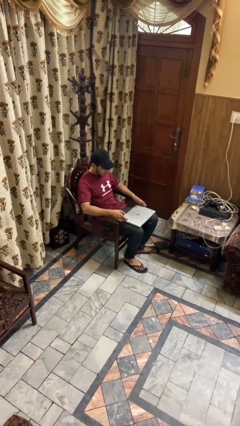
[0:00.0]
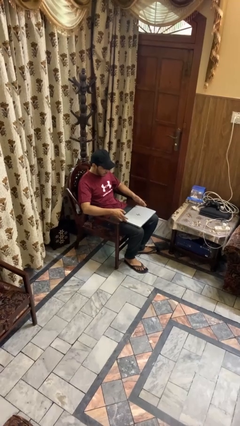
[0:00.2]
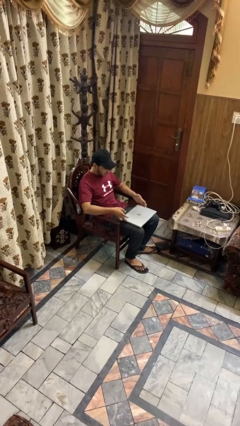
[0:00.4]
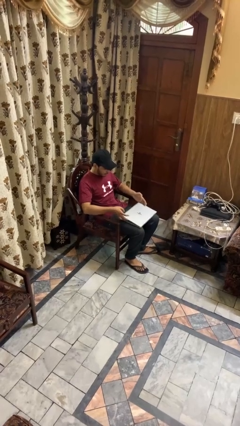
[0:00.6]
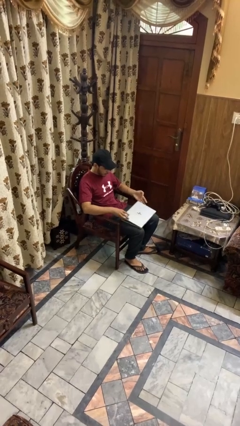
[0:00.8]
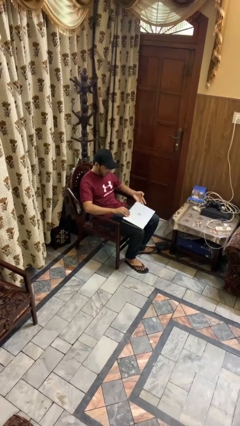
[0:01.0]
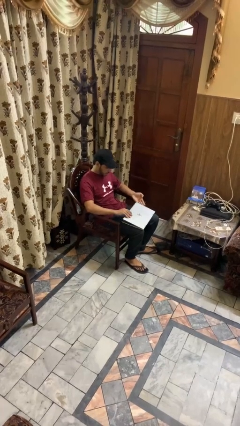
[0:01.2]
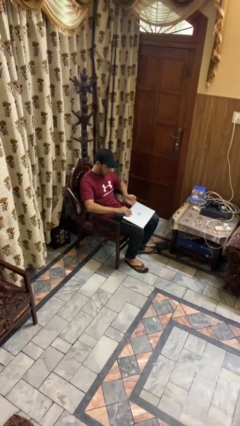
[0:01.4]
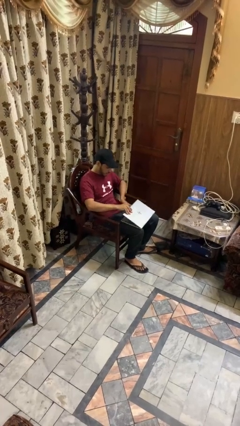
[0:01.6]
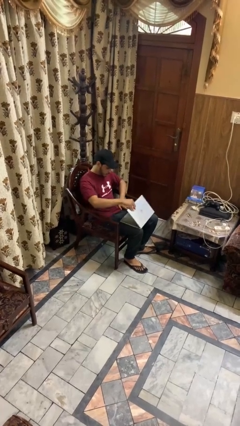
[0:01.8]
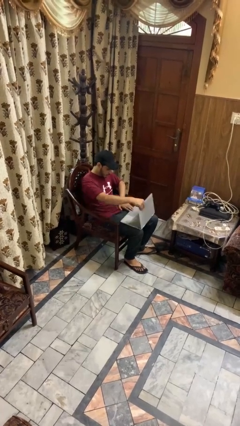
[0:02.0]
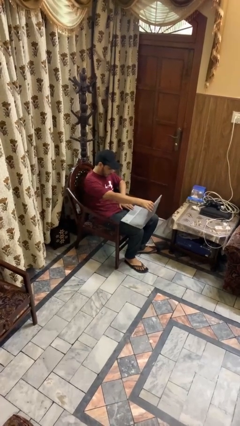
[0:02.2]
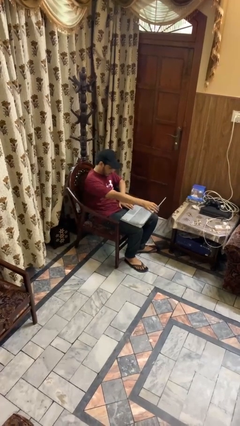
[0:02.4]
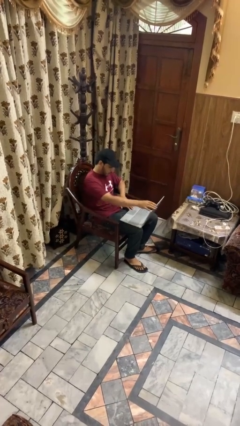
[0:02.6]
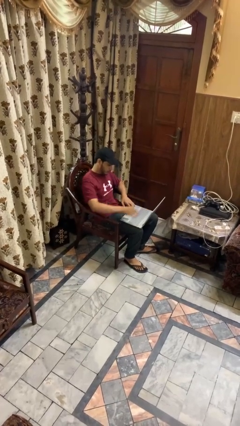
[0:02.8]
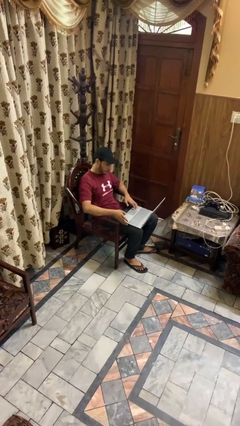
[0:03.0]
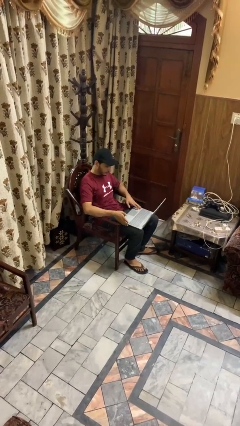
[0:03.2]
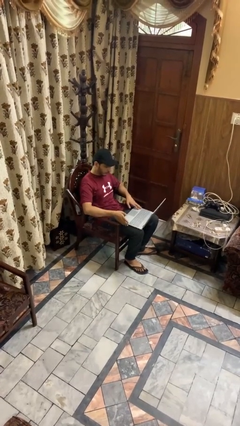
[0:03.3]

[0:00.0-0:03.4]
person opens laptop

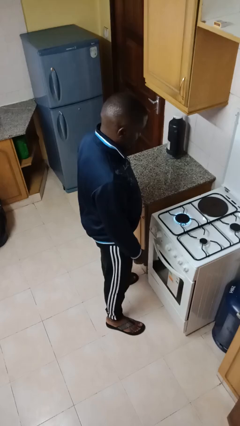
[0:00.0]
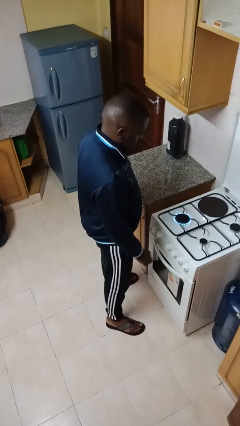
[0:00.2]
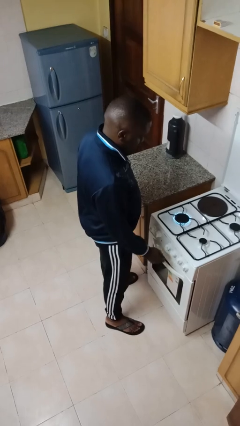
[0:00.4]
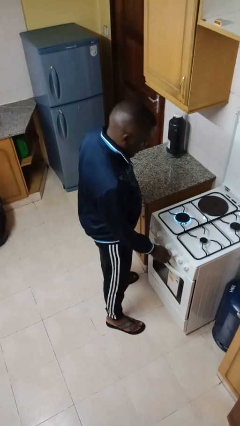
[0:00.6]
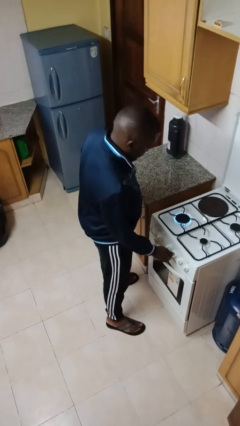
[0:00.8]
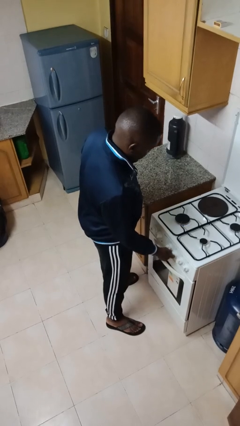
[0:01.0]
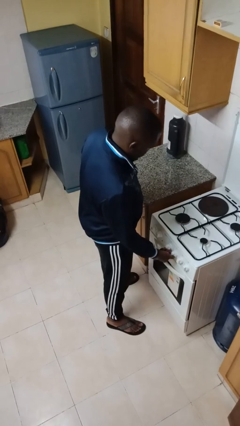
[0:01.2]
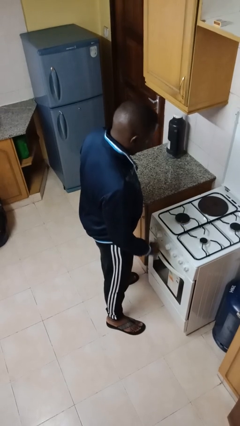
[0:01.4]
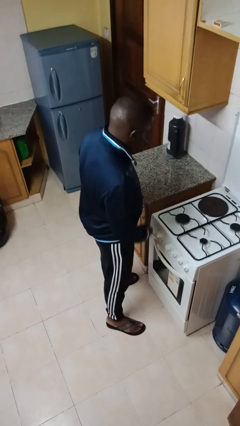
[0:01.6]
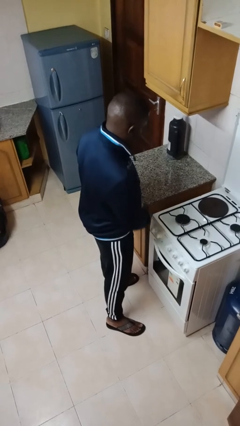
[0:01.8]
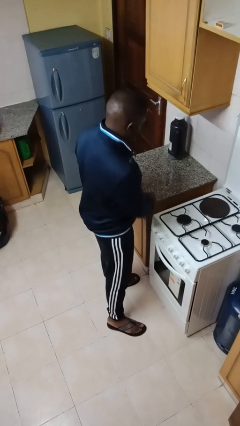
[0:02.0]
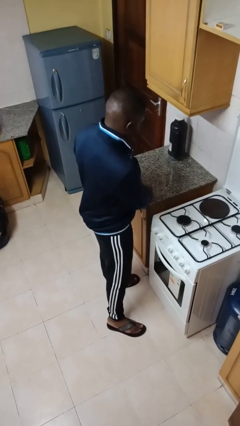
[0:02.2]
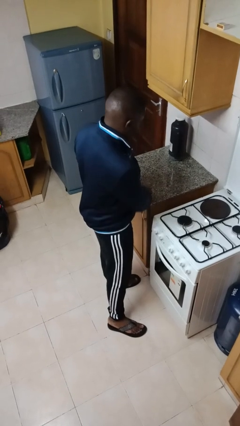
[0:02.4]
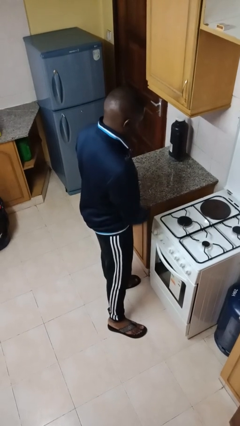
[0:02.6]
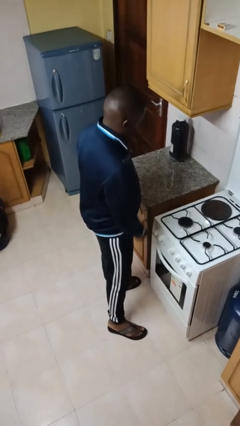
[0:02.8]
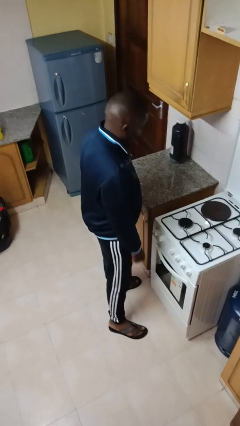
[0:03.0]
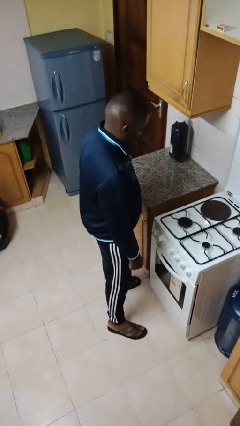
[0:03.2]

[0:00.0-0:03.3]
person turns off stovetop

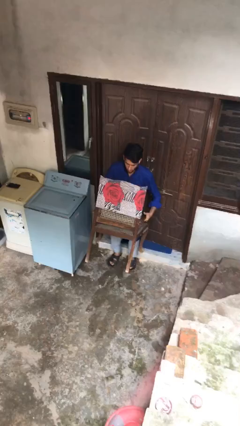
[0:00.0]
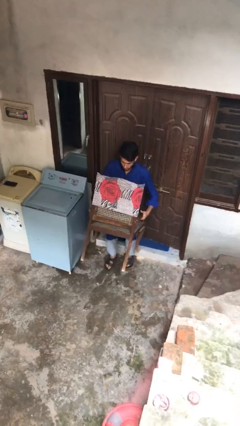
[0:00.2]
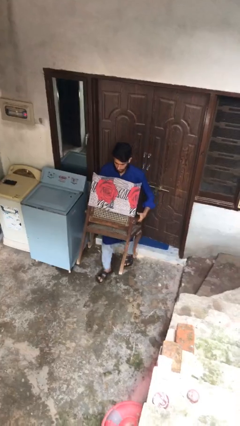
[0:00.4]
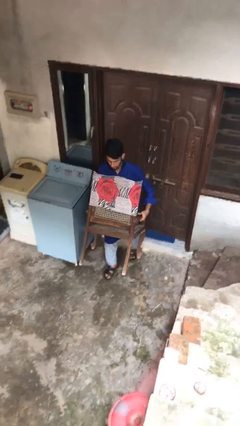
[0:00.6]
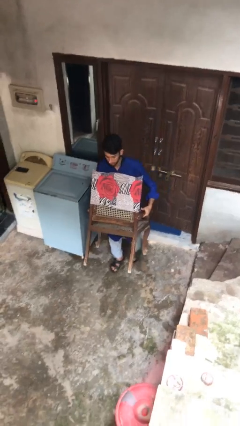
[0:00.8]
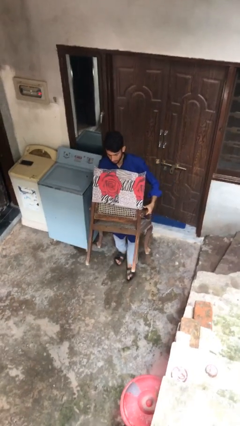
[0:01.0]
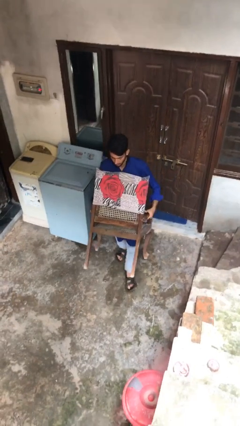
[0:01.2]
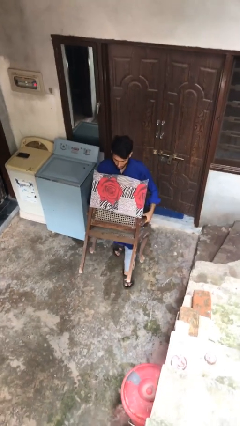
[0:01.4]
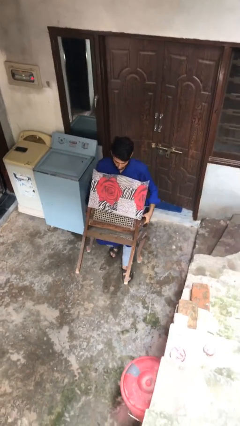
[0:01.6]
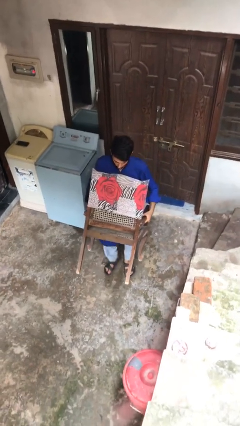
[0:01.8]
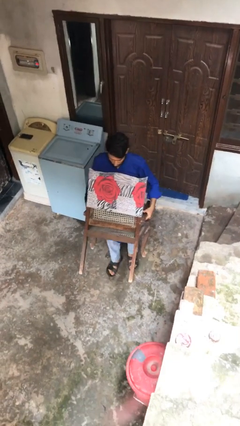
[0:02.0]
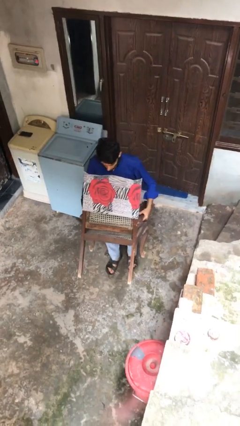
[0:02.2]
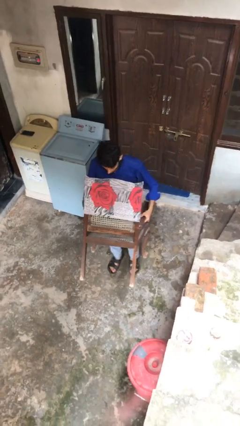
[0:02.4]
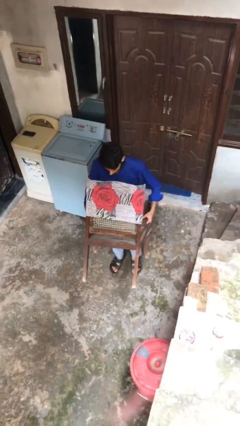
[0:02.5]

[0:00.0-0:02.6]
person carries heavy object

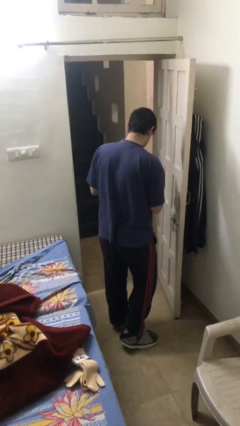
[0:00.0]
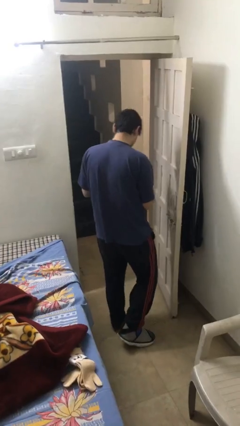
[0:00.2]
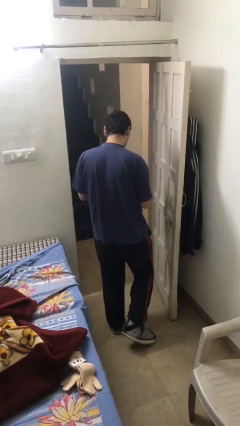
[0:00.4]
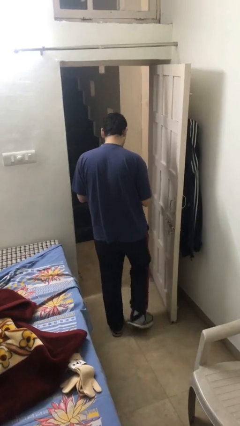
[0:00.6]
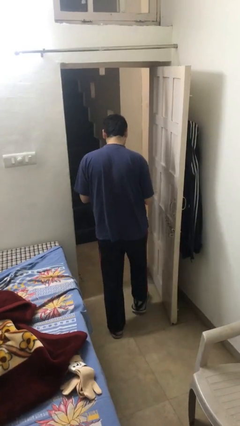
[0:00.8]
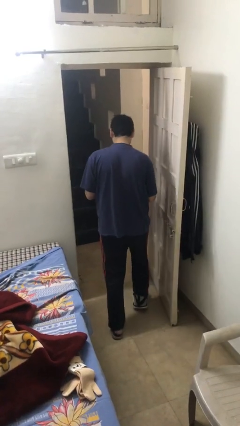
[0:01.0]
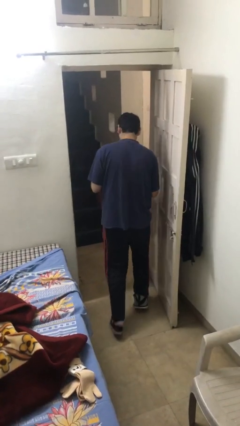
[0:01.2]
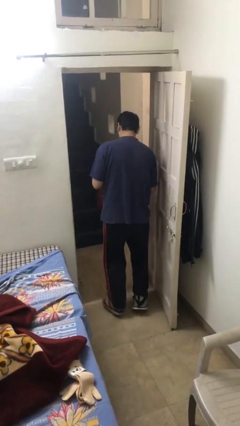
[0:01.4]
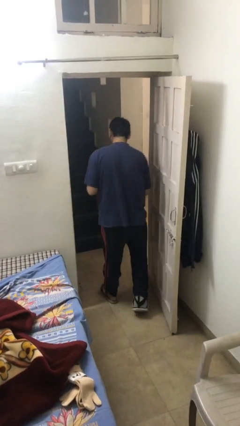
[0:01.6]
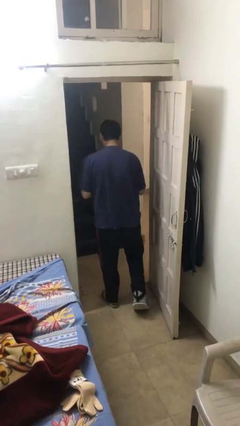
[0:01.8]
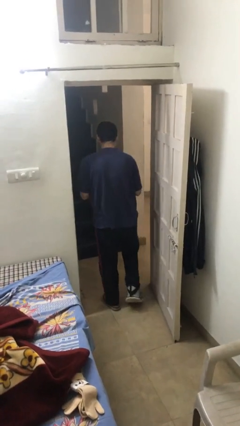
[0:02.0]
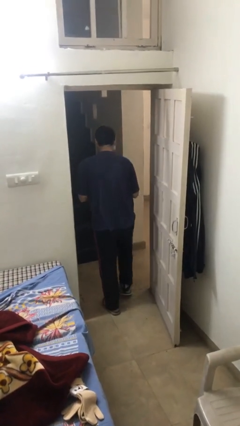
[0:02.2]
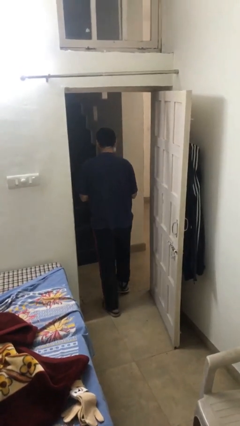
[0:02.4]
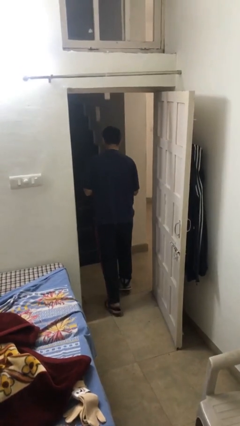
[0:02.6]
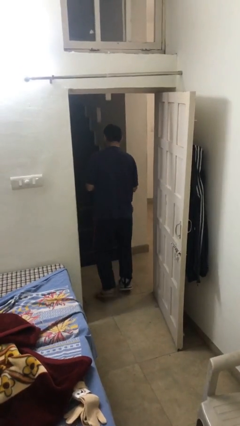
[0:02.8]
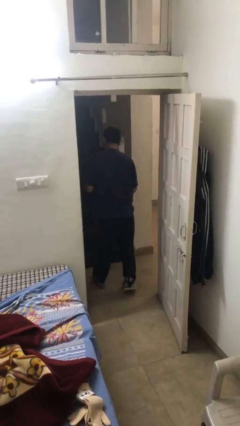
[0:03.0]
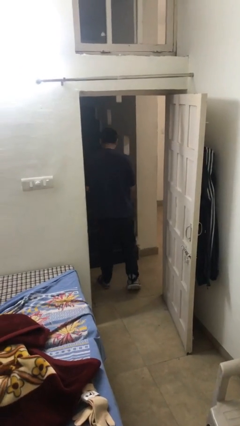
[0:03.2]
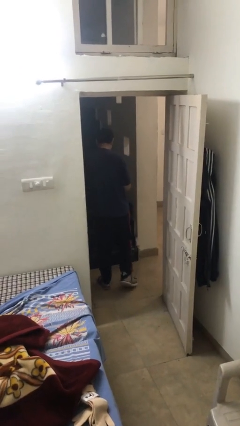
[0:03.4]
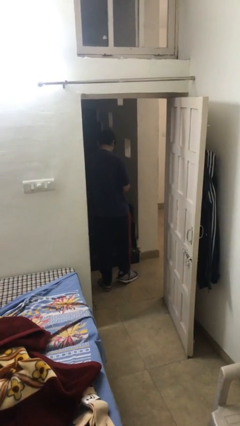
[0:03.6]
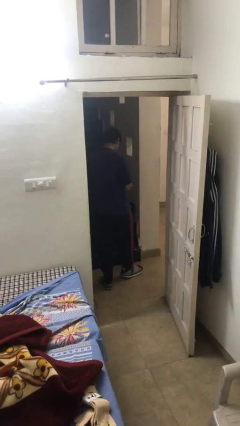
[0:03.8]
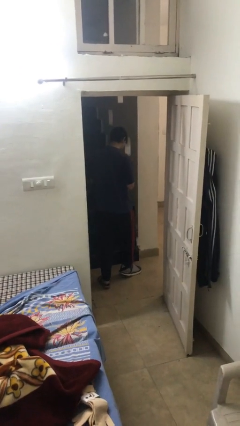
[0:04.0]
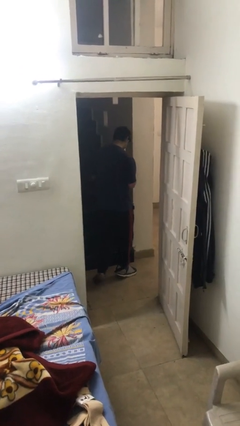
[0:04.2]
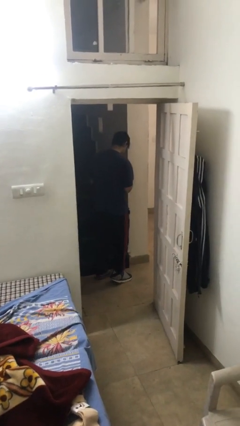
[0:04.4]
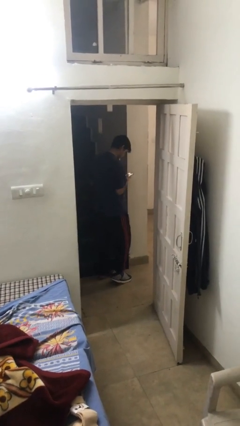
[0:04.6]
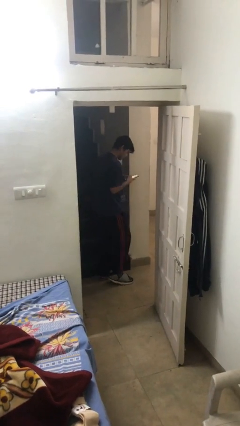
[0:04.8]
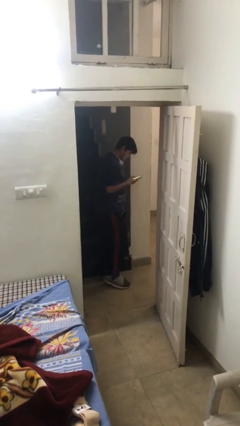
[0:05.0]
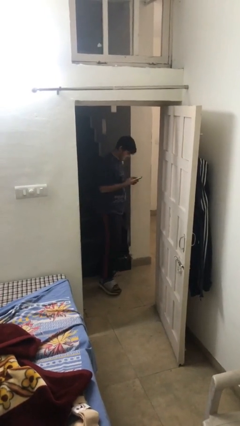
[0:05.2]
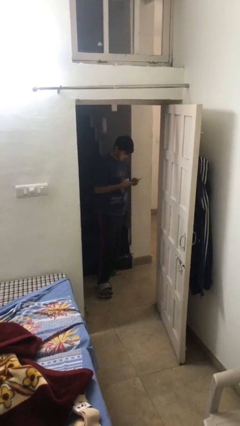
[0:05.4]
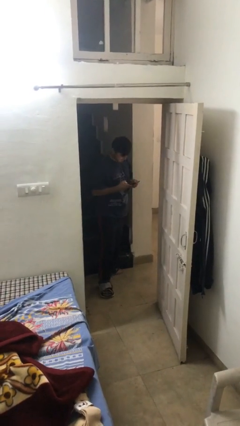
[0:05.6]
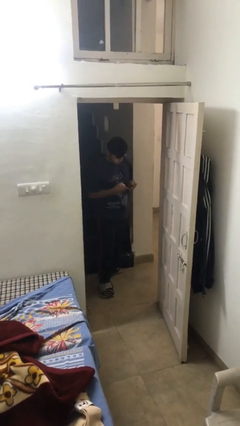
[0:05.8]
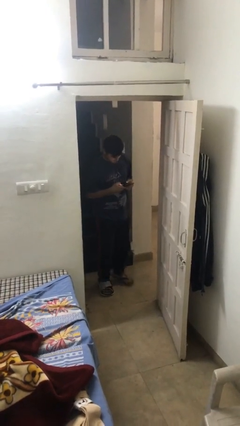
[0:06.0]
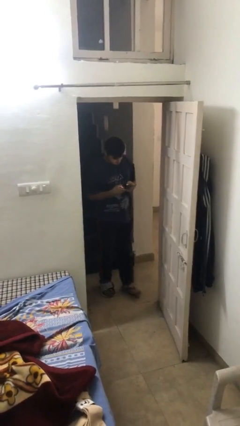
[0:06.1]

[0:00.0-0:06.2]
person exits scene through structure

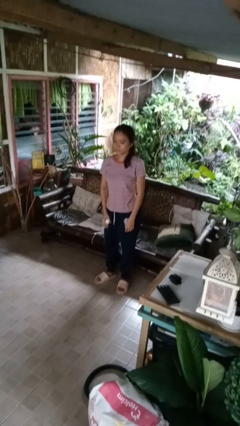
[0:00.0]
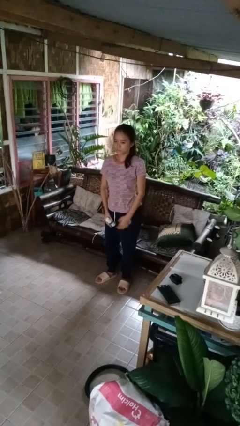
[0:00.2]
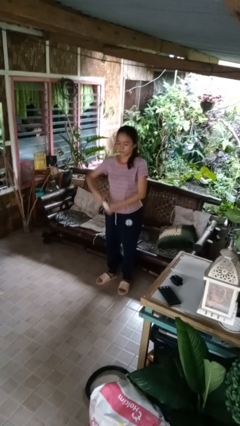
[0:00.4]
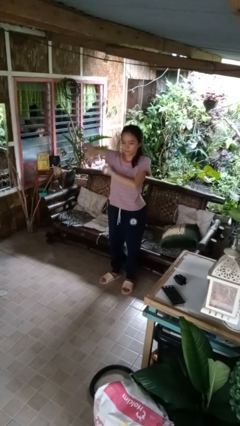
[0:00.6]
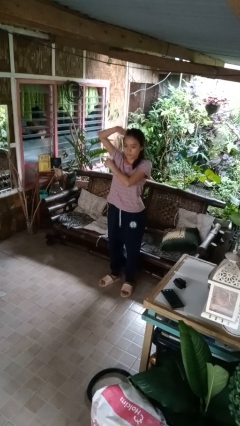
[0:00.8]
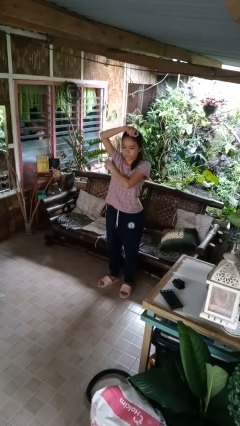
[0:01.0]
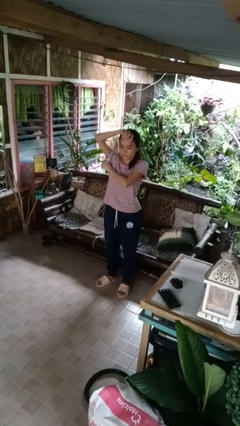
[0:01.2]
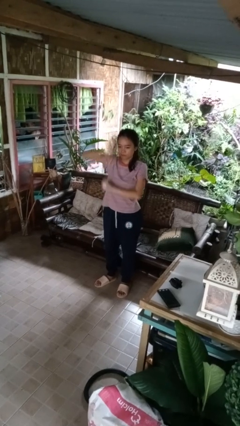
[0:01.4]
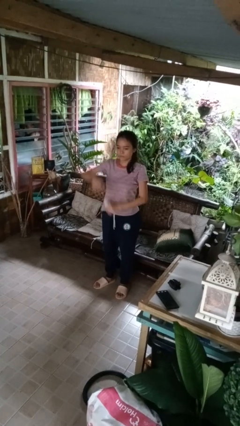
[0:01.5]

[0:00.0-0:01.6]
person applies deodorant

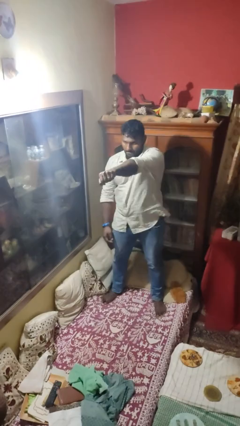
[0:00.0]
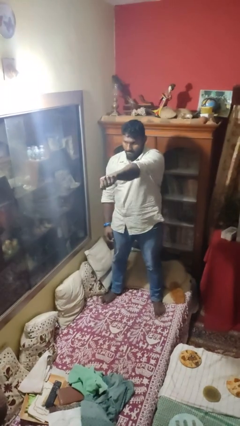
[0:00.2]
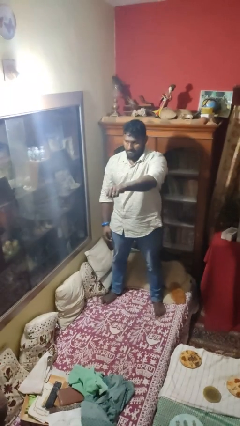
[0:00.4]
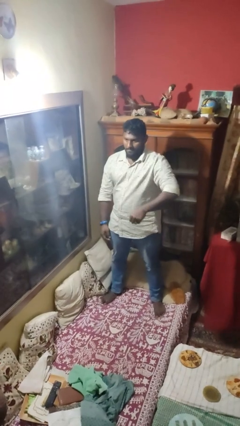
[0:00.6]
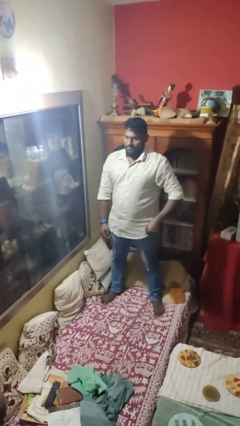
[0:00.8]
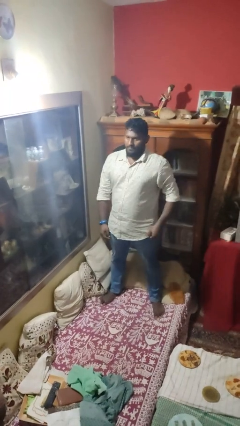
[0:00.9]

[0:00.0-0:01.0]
person punches
